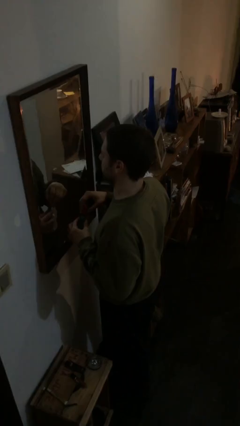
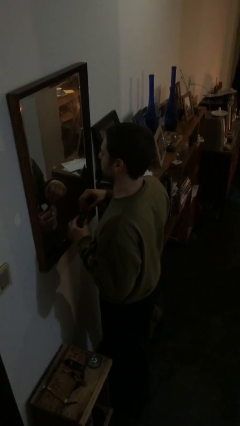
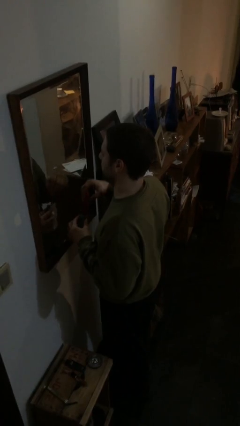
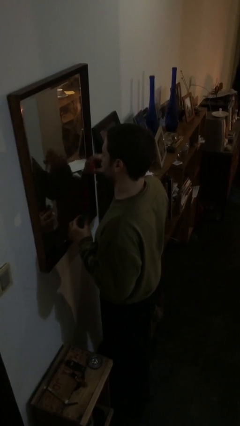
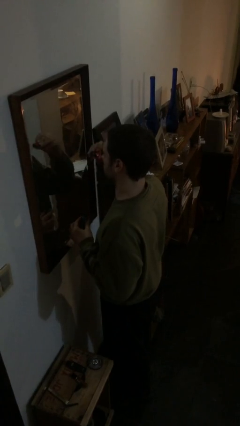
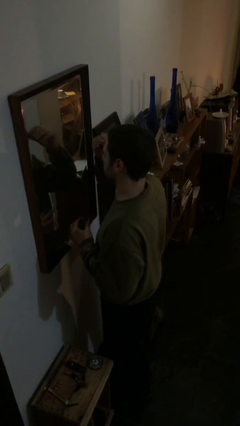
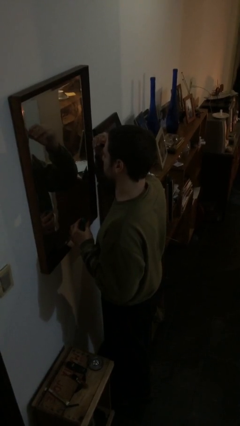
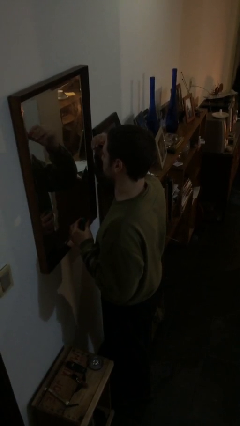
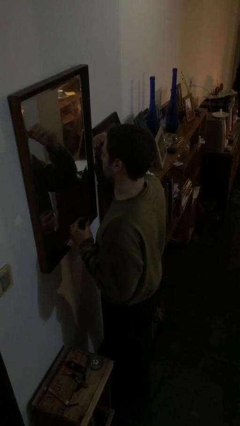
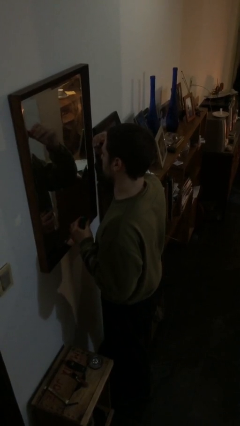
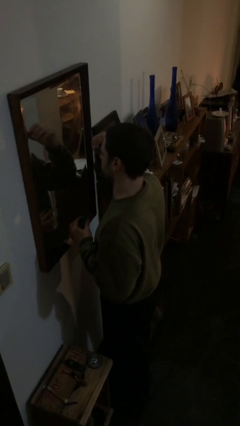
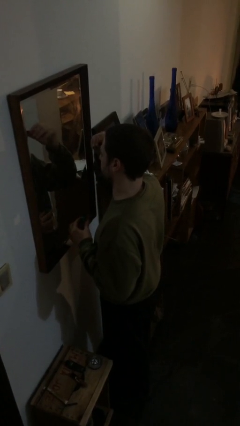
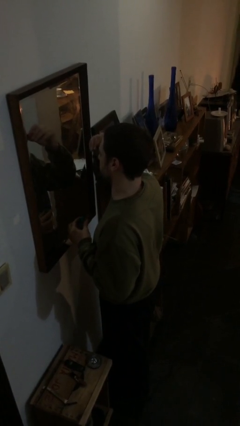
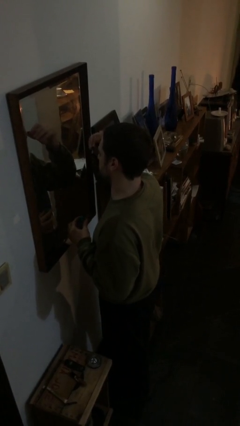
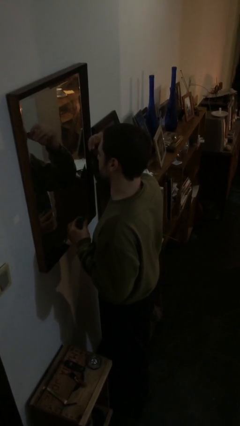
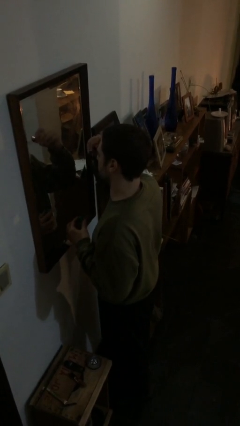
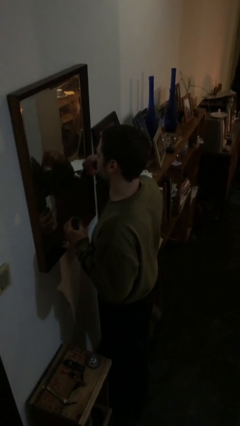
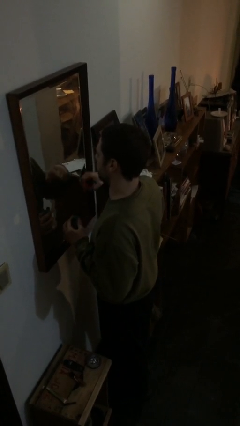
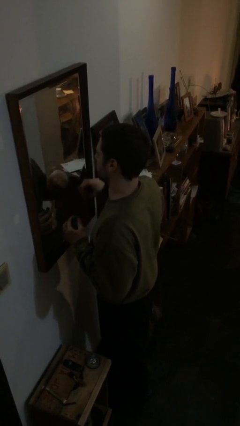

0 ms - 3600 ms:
person applies eye makeup

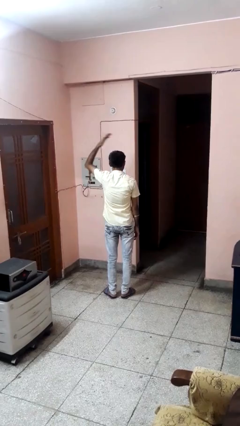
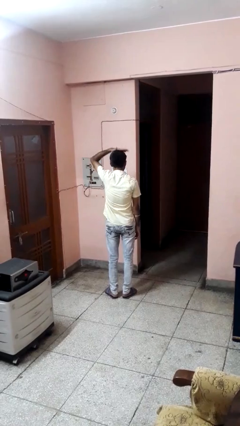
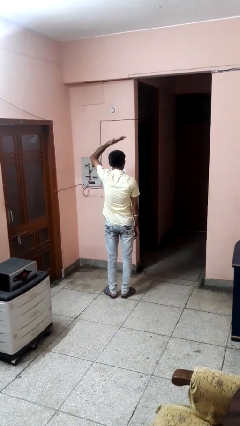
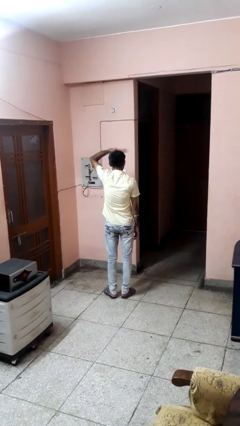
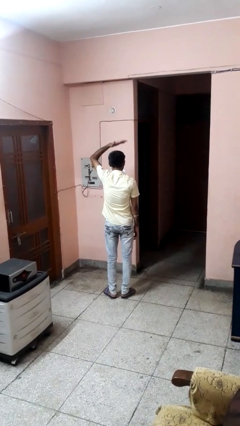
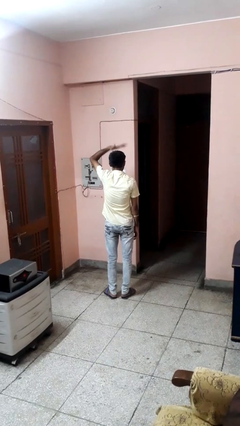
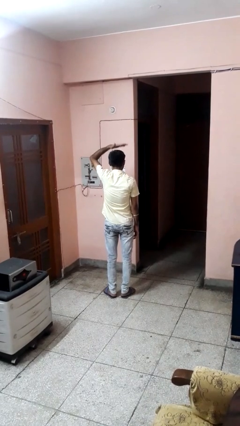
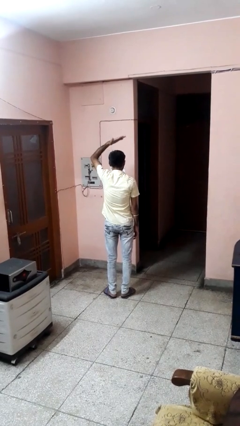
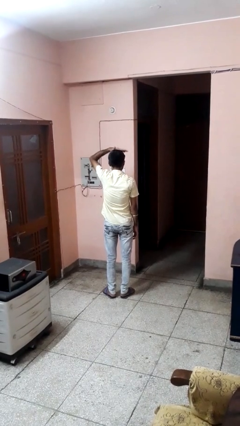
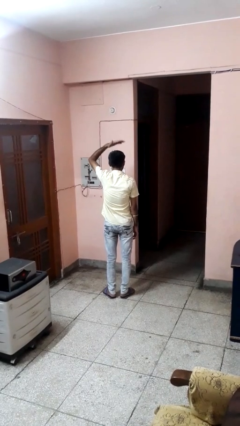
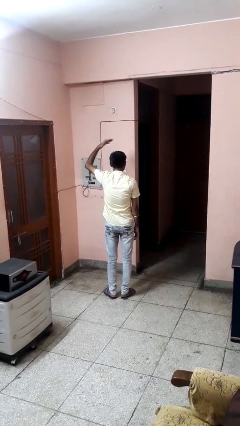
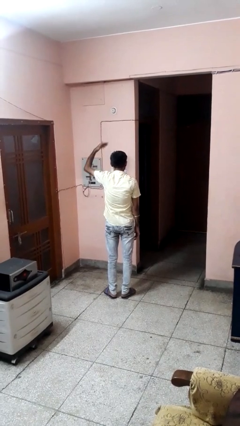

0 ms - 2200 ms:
person pats head

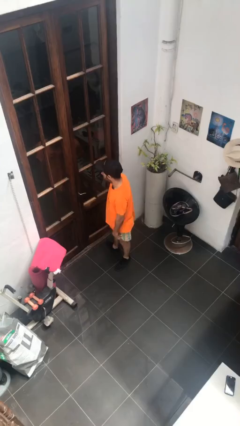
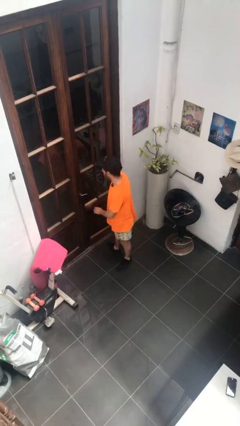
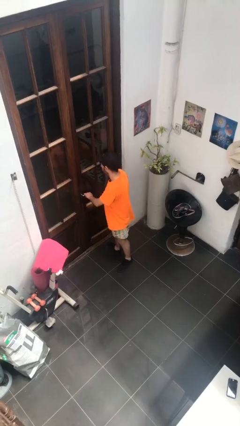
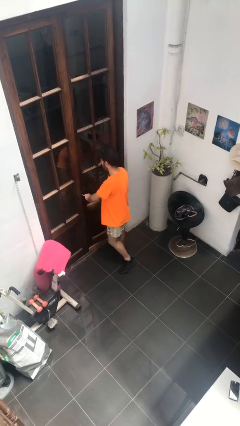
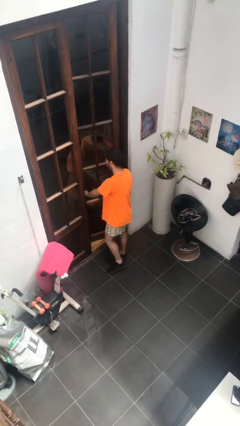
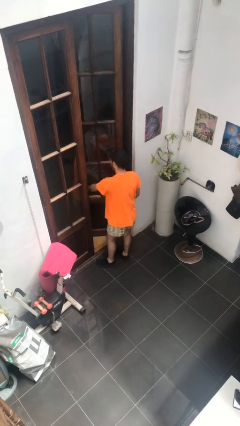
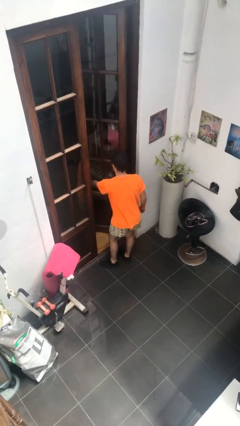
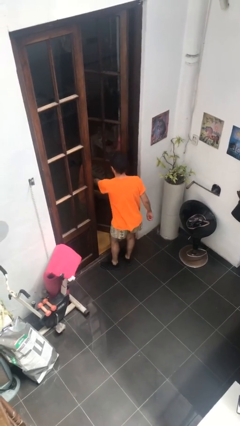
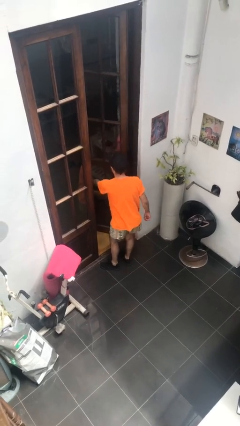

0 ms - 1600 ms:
person opens facility door

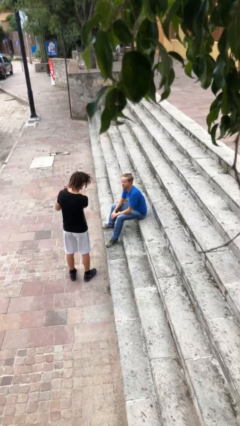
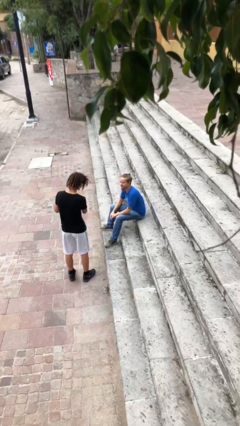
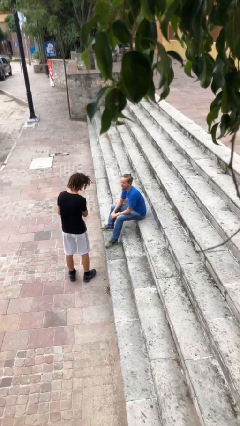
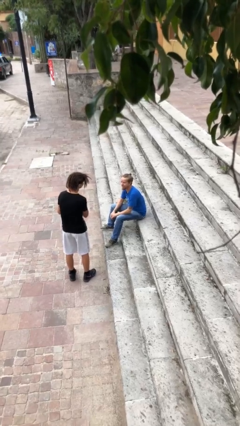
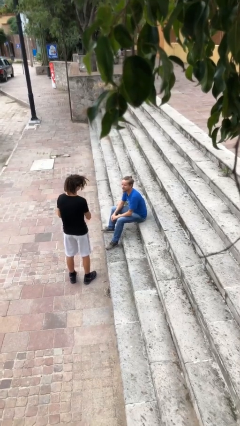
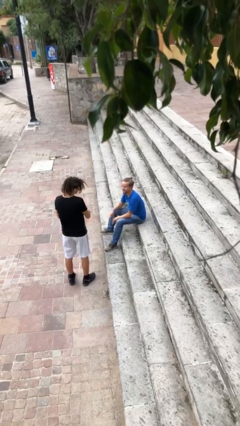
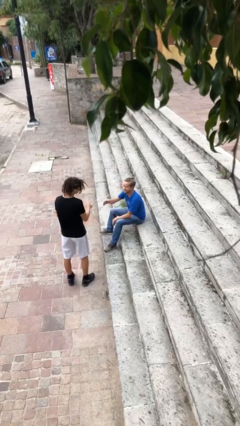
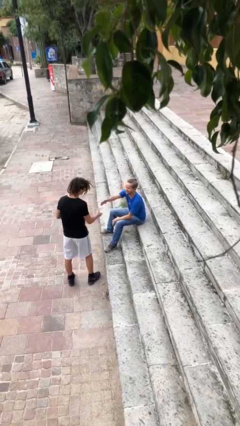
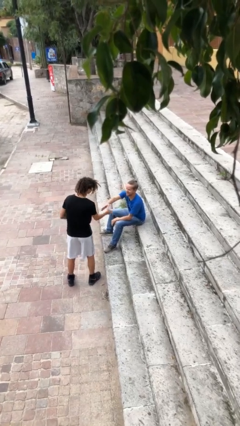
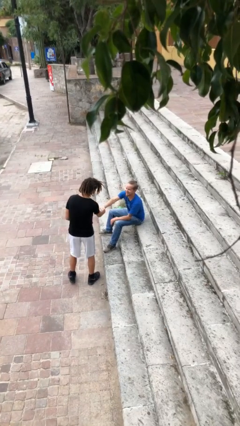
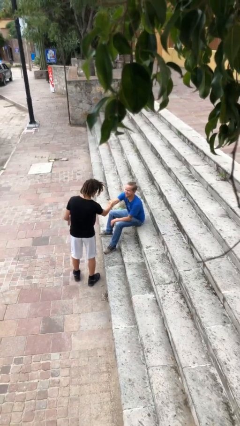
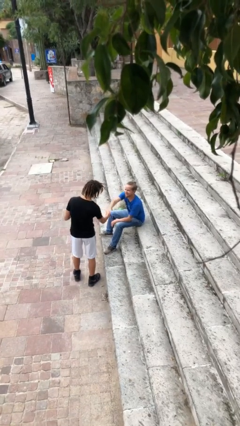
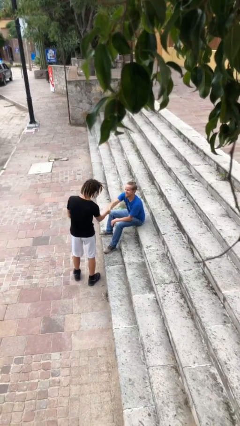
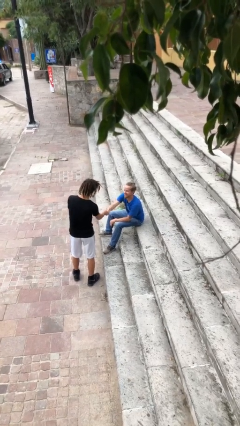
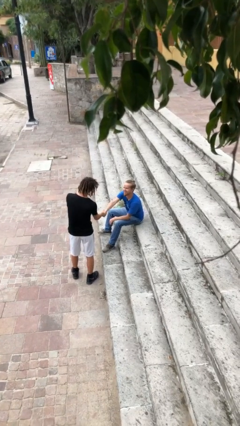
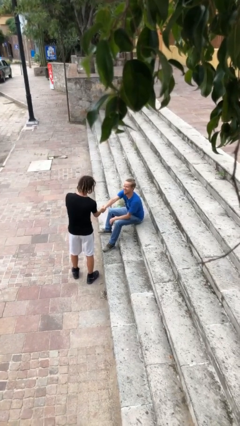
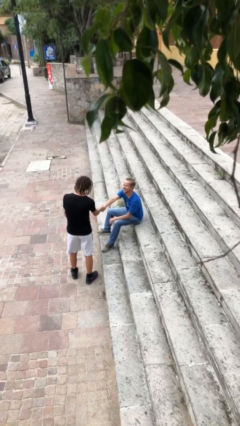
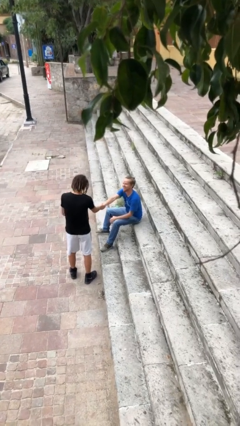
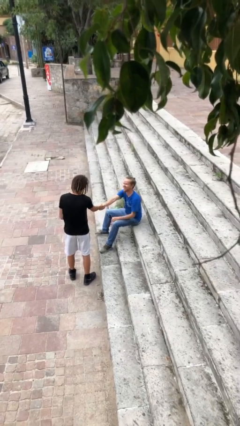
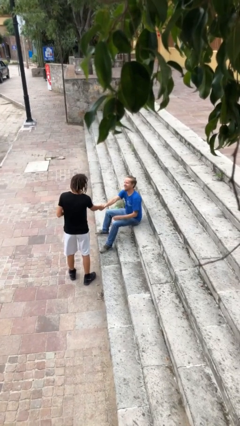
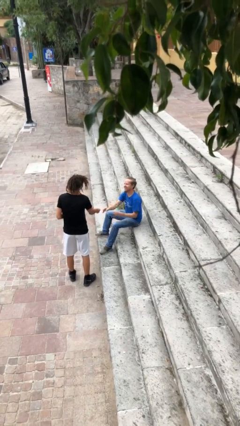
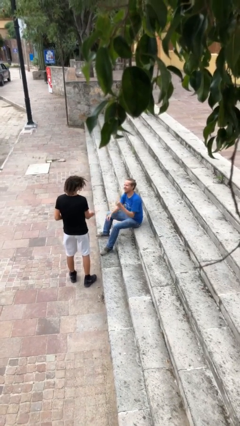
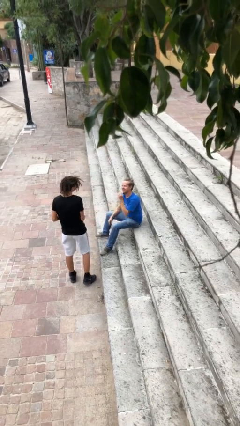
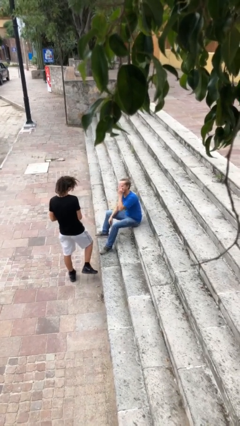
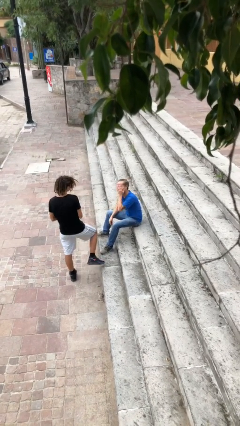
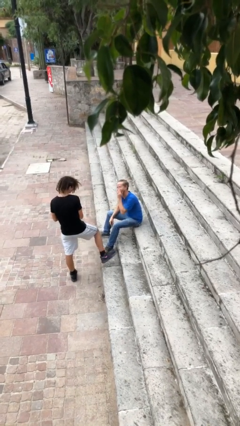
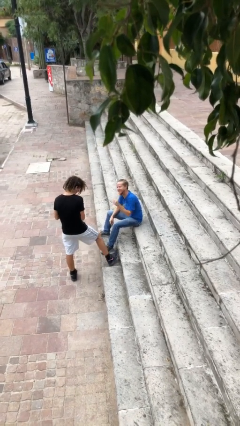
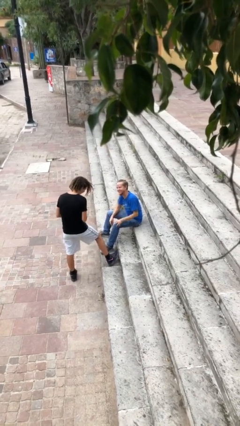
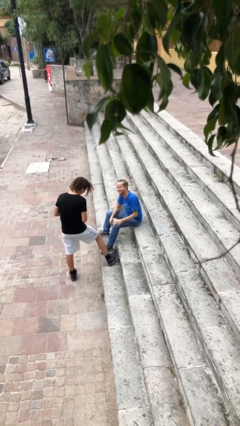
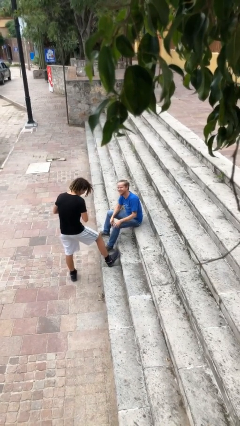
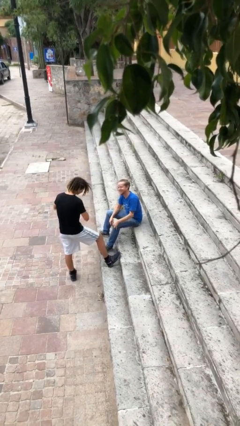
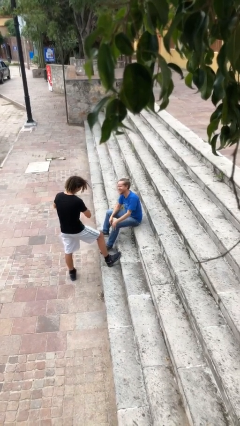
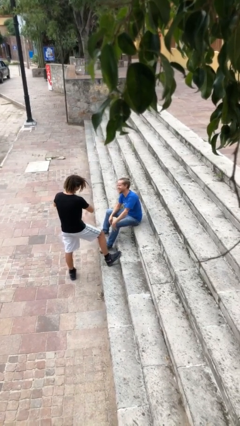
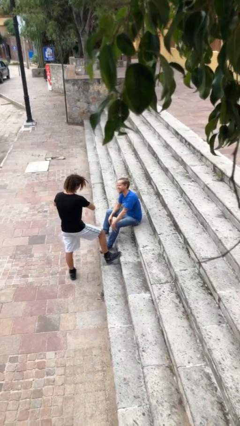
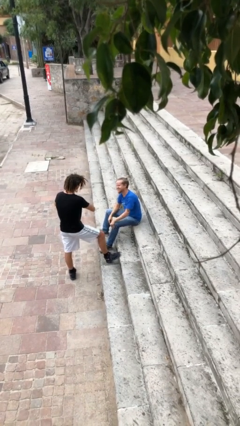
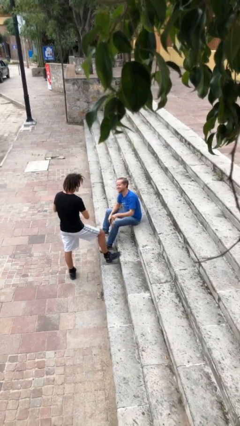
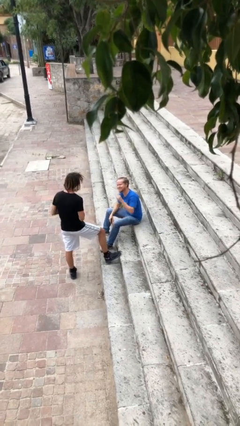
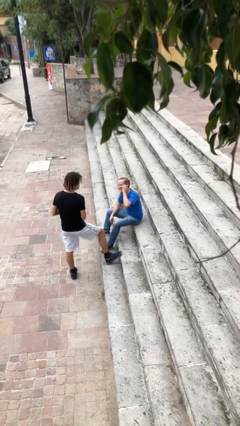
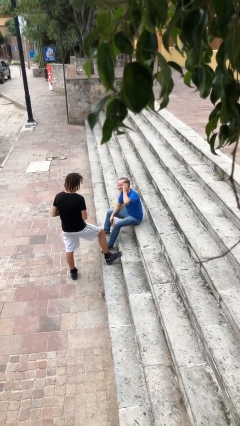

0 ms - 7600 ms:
person shakes hand

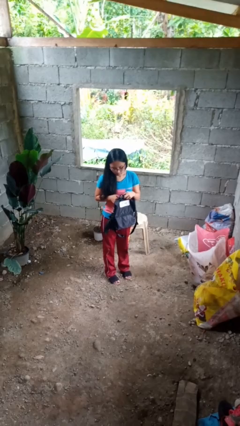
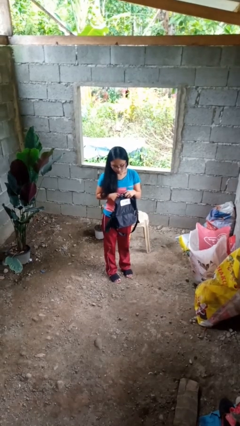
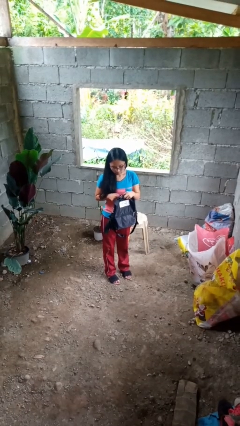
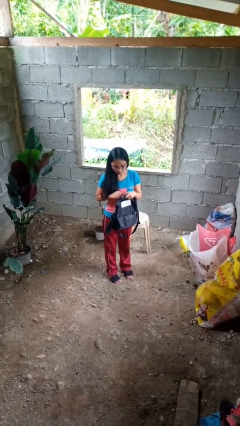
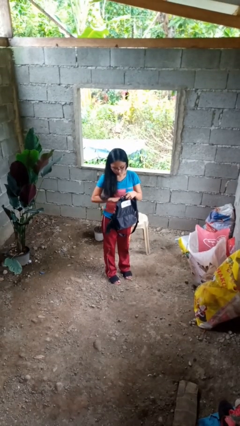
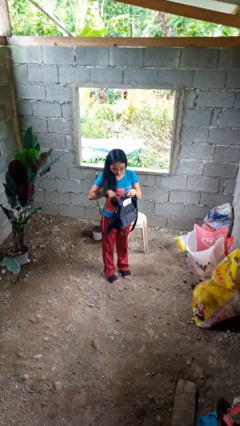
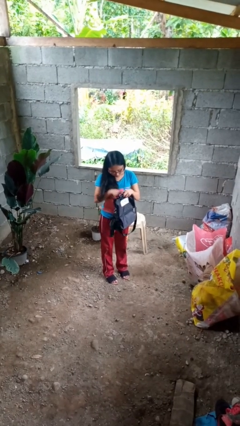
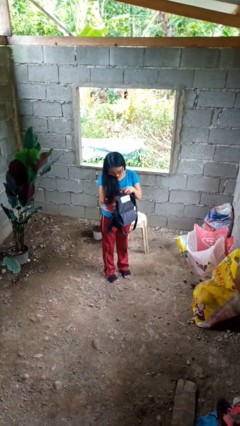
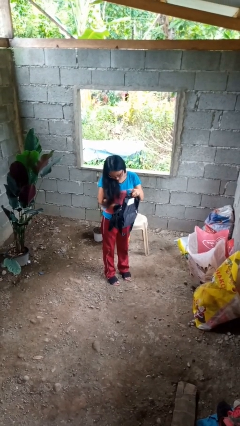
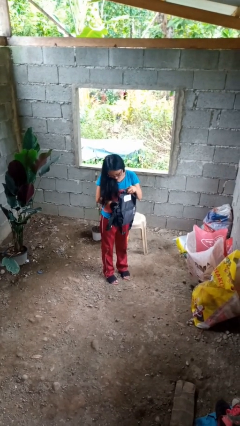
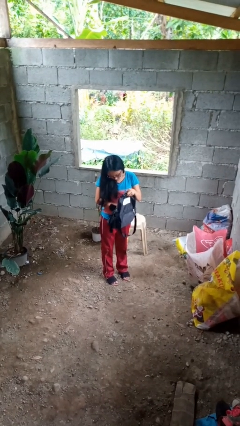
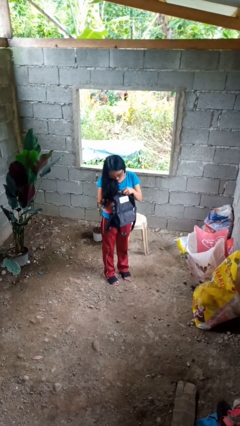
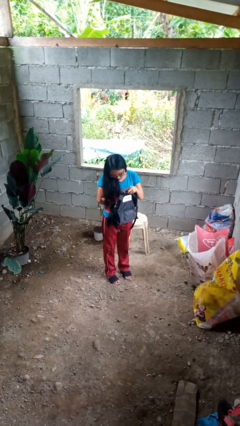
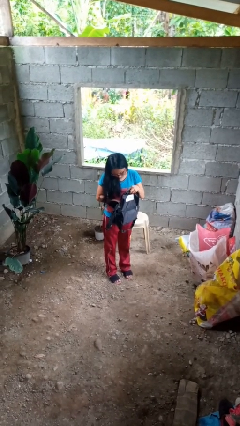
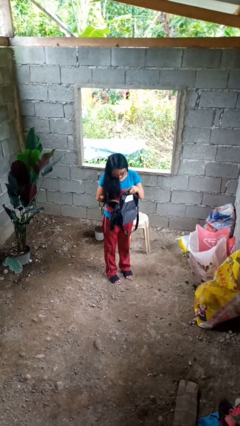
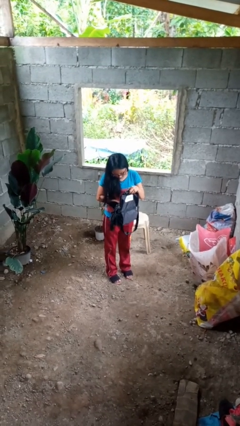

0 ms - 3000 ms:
person searches in backpack
